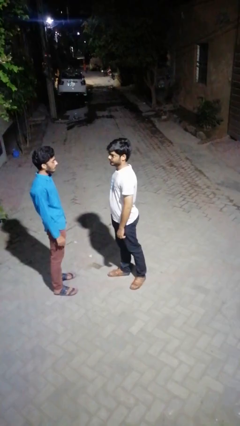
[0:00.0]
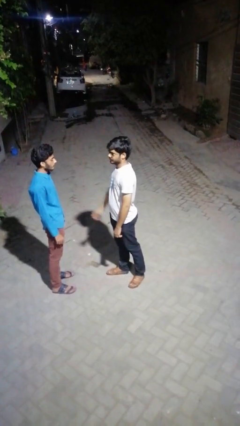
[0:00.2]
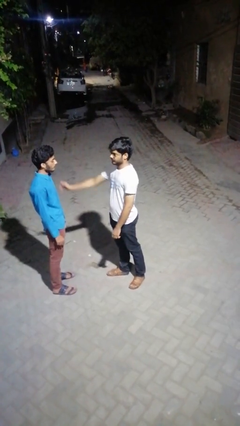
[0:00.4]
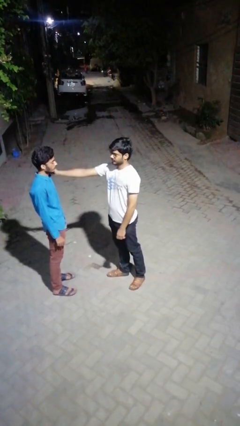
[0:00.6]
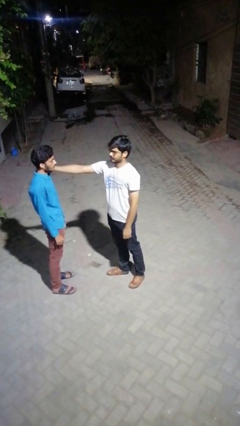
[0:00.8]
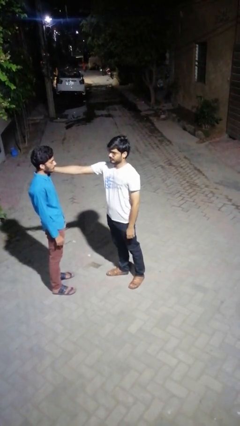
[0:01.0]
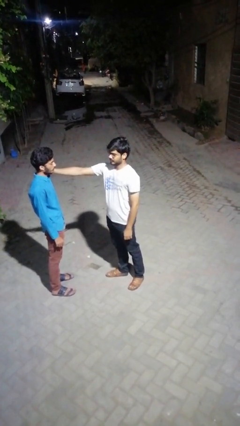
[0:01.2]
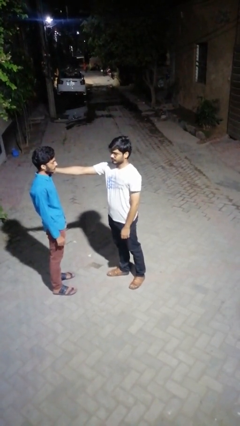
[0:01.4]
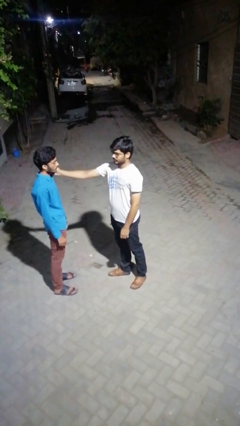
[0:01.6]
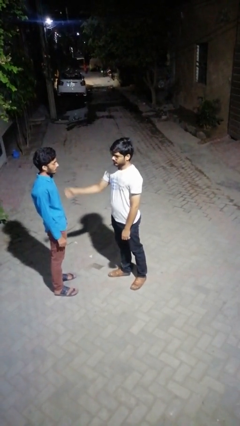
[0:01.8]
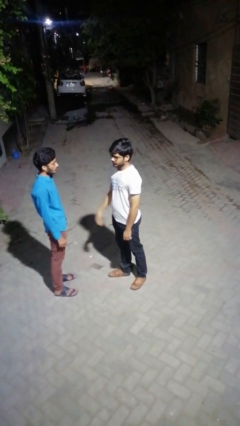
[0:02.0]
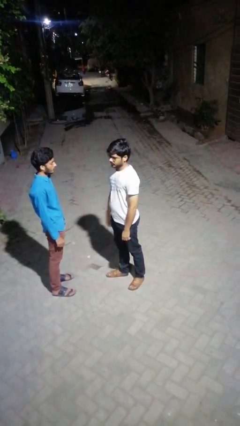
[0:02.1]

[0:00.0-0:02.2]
person touches face of person

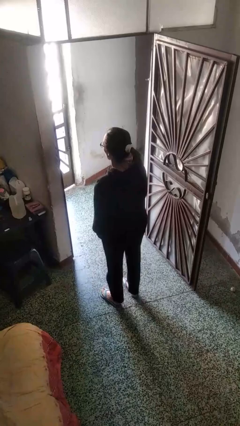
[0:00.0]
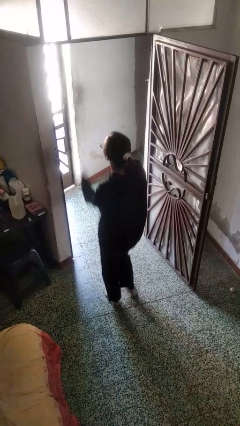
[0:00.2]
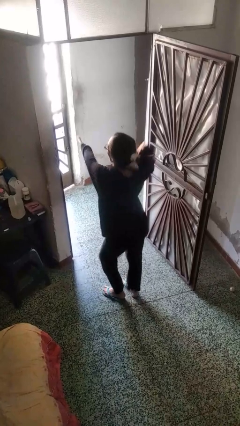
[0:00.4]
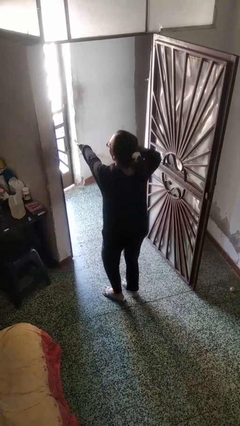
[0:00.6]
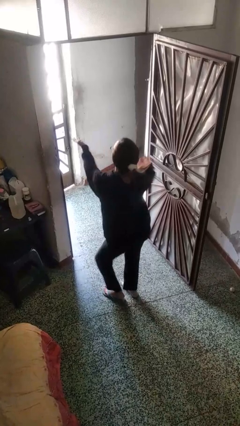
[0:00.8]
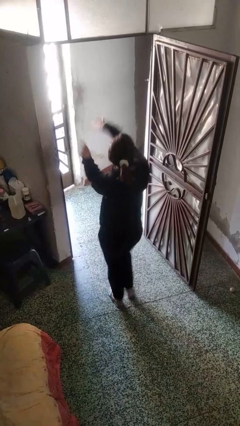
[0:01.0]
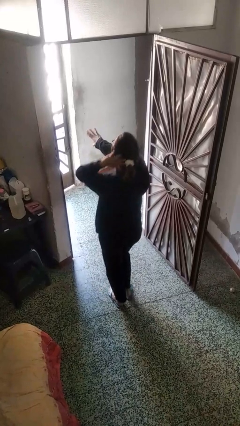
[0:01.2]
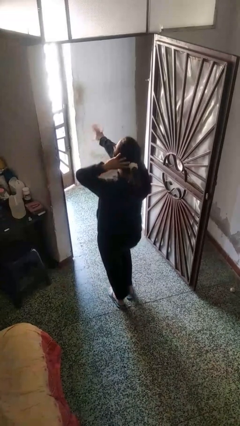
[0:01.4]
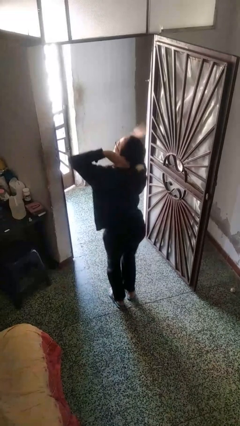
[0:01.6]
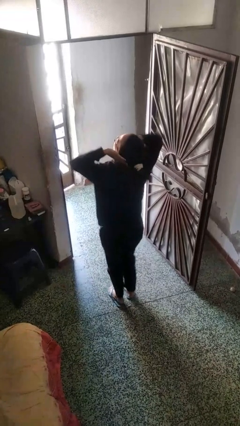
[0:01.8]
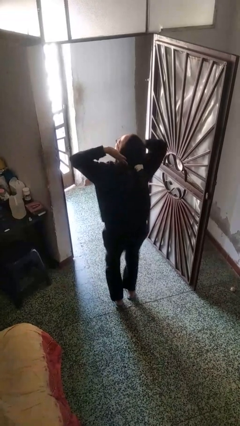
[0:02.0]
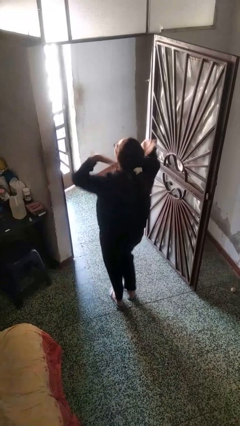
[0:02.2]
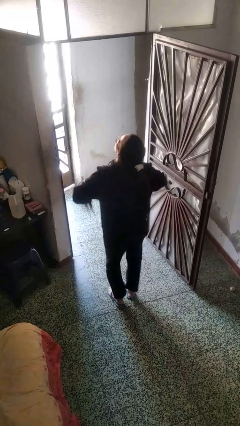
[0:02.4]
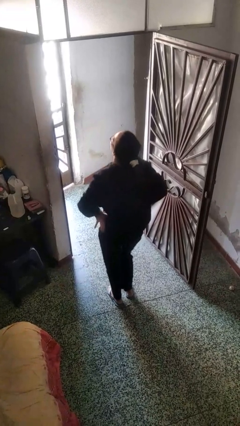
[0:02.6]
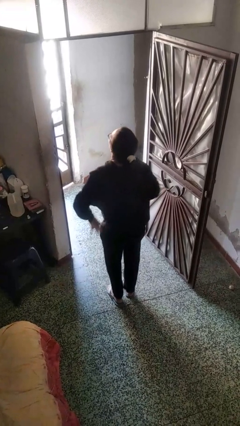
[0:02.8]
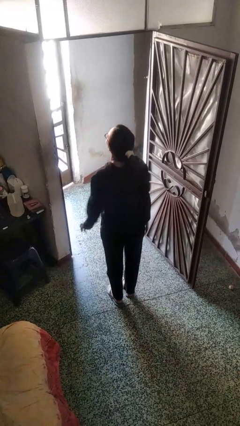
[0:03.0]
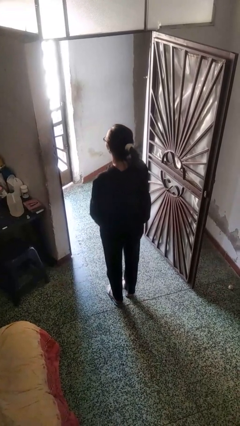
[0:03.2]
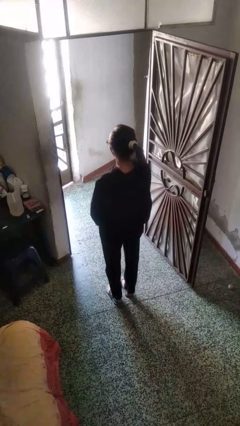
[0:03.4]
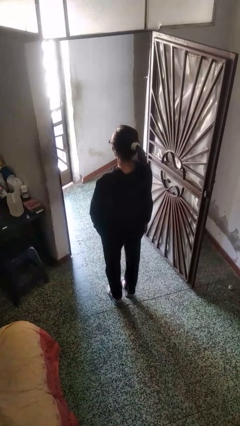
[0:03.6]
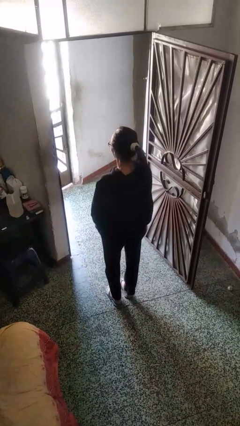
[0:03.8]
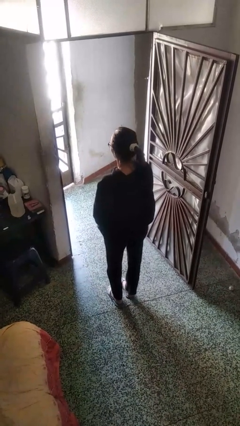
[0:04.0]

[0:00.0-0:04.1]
person dances in place

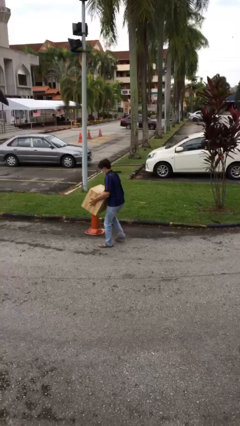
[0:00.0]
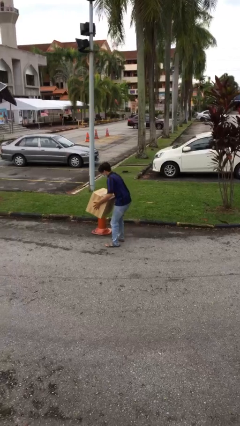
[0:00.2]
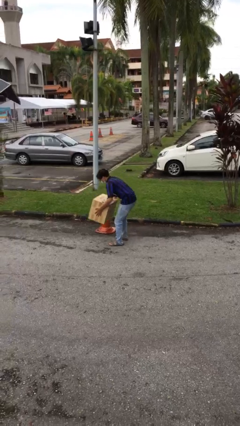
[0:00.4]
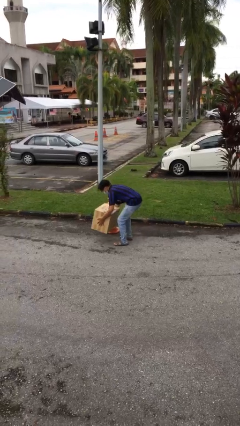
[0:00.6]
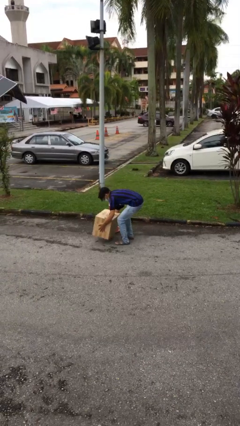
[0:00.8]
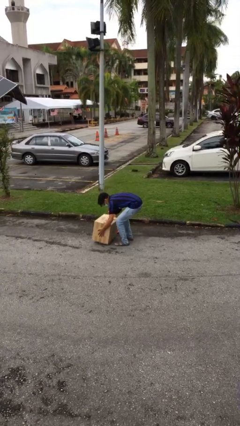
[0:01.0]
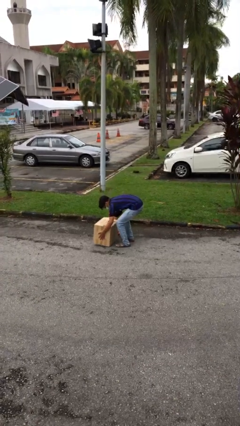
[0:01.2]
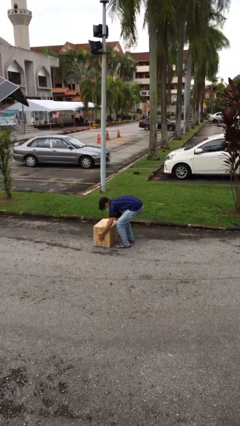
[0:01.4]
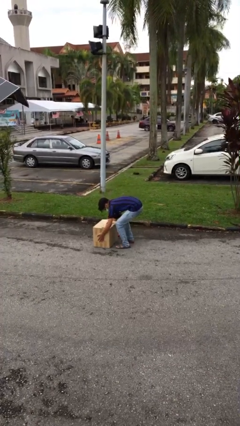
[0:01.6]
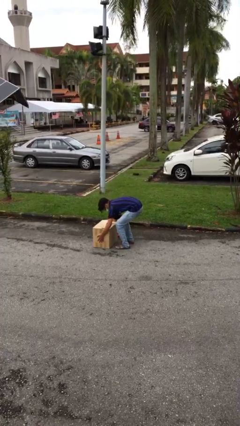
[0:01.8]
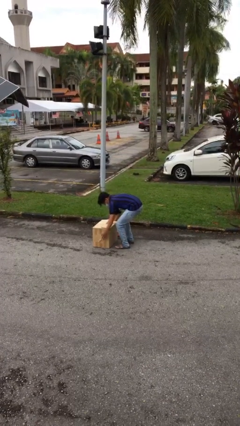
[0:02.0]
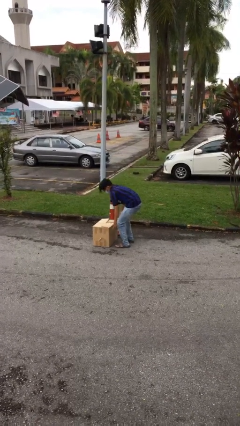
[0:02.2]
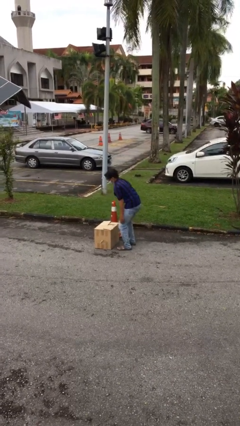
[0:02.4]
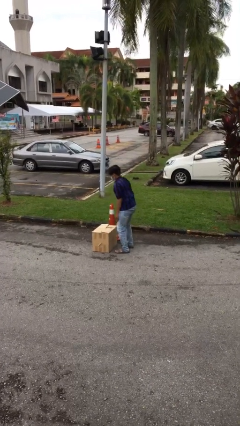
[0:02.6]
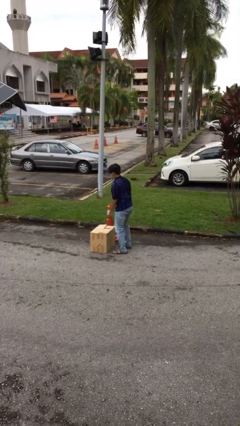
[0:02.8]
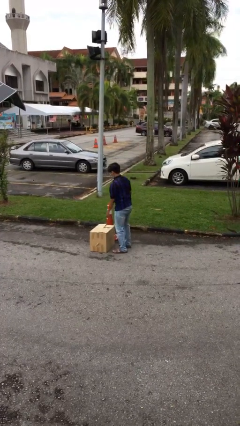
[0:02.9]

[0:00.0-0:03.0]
person puts down object on floor

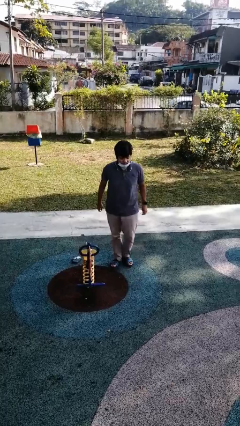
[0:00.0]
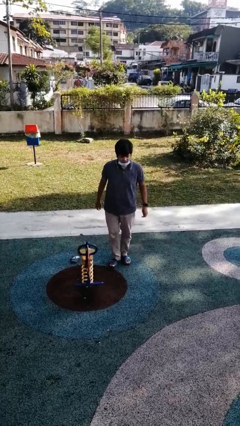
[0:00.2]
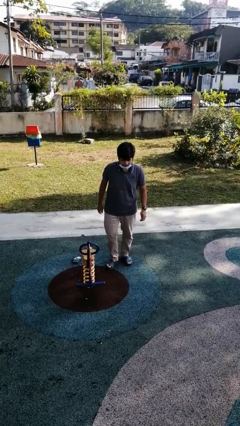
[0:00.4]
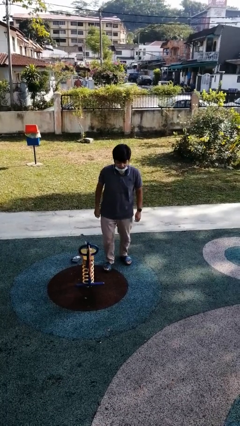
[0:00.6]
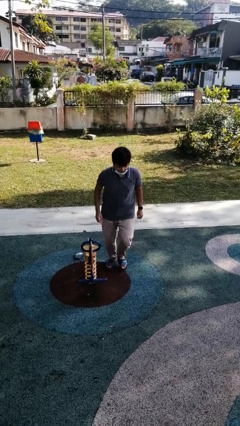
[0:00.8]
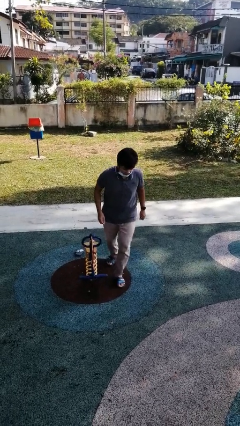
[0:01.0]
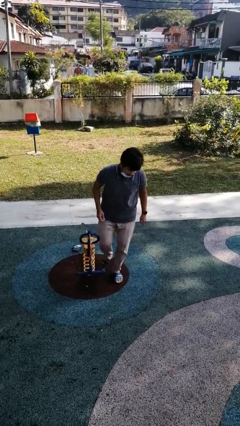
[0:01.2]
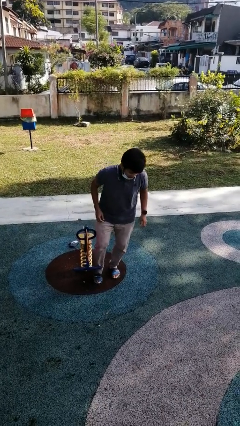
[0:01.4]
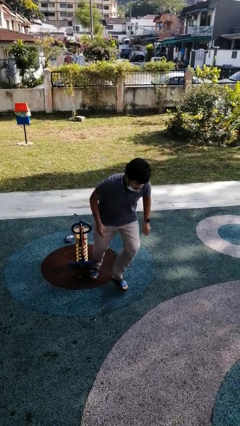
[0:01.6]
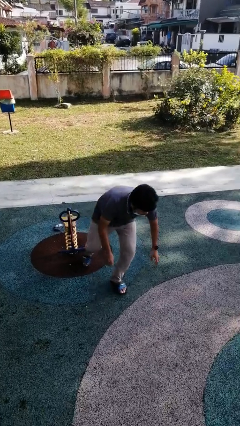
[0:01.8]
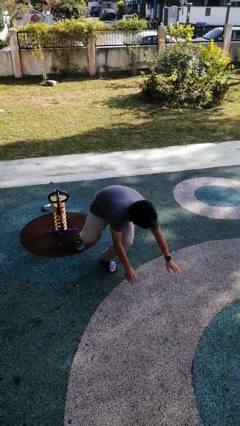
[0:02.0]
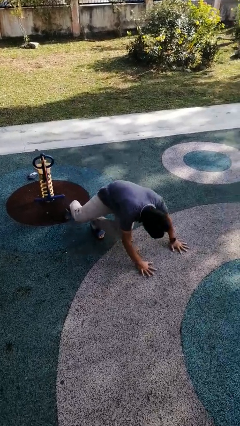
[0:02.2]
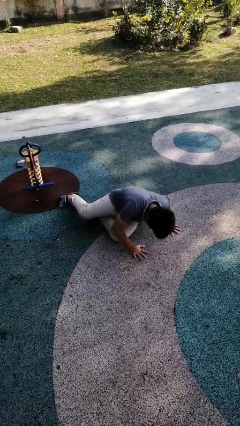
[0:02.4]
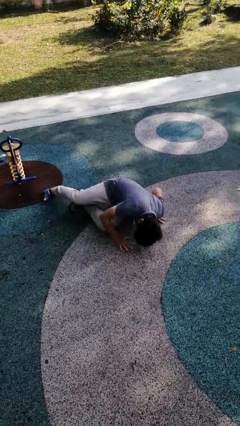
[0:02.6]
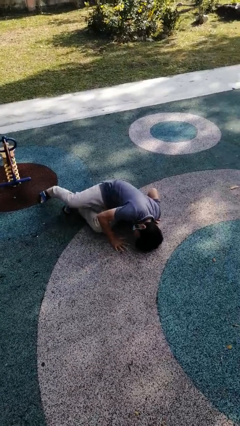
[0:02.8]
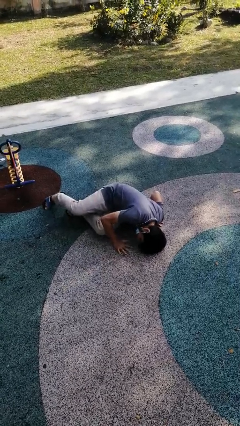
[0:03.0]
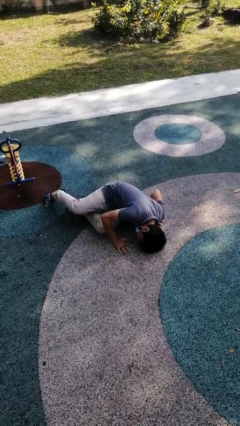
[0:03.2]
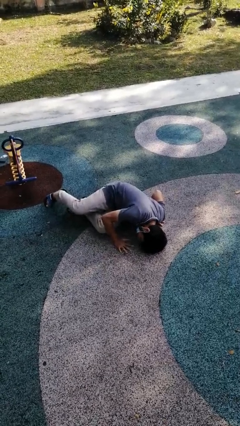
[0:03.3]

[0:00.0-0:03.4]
person trips on object on floor

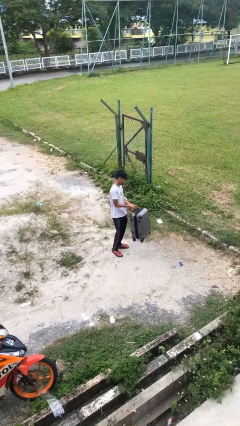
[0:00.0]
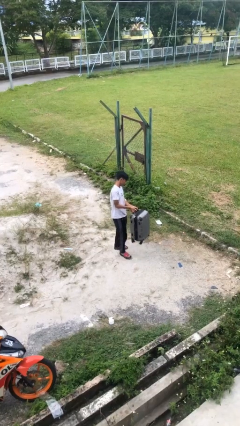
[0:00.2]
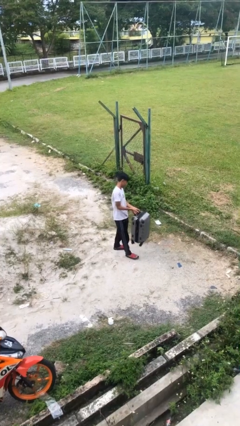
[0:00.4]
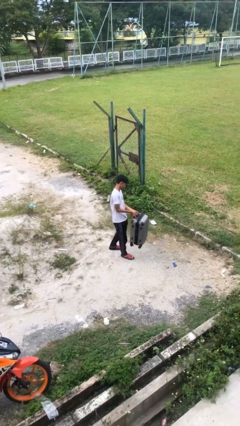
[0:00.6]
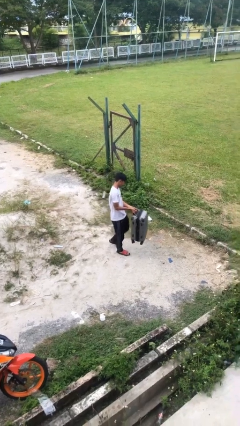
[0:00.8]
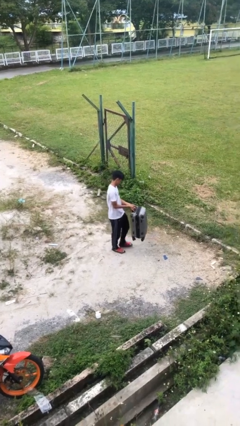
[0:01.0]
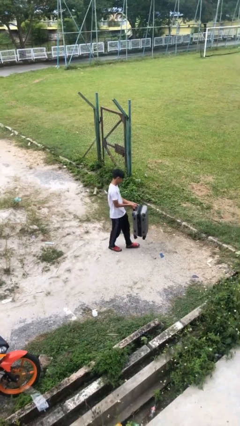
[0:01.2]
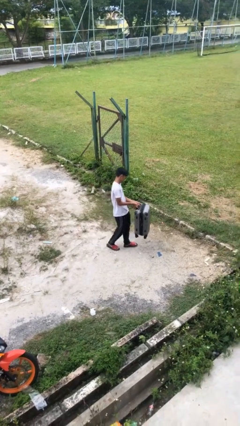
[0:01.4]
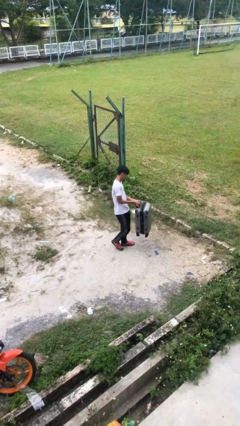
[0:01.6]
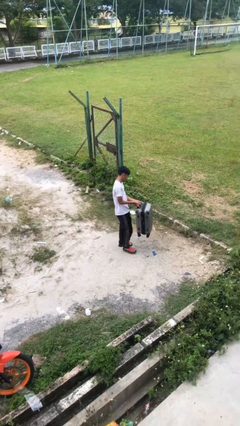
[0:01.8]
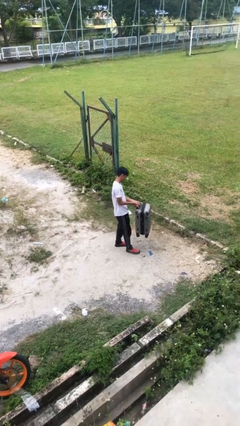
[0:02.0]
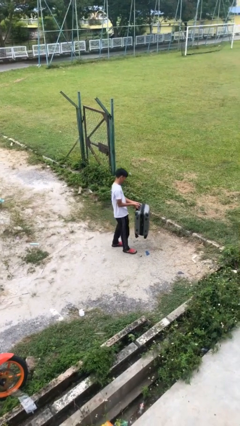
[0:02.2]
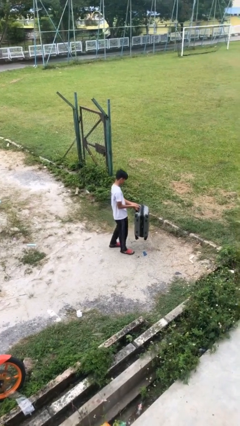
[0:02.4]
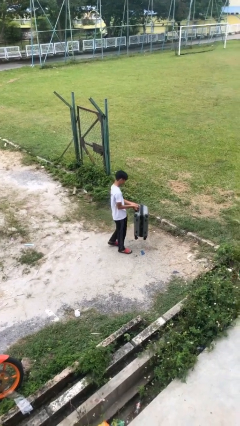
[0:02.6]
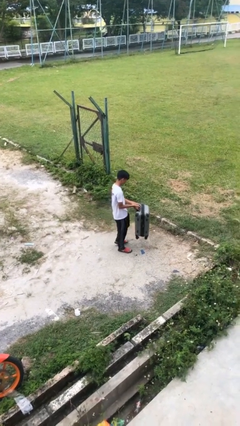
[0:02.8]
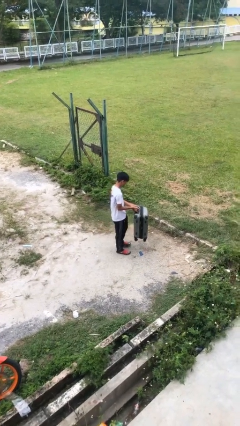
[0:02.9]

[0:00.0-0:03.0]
person carries heavy object

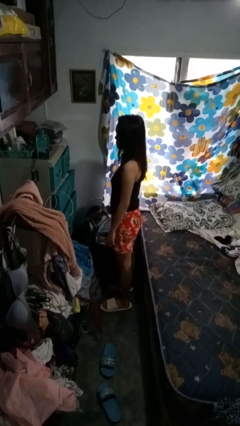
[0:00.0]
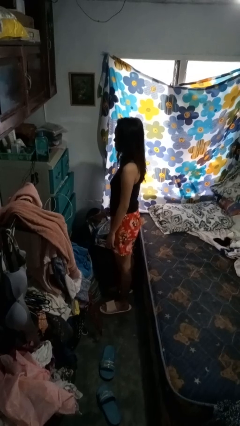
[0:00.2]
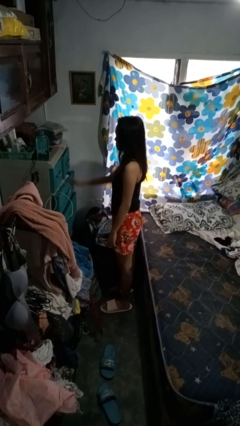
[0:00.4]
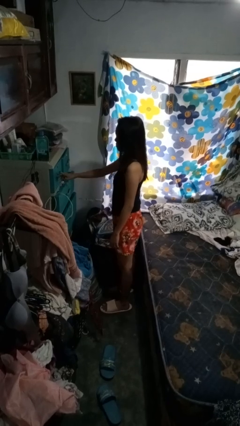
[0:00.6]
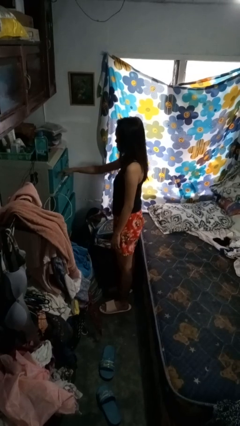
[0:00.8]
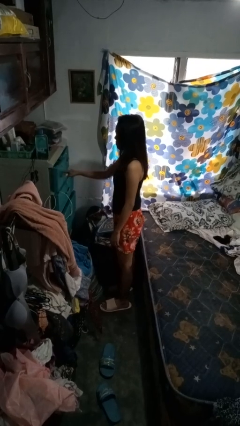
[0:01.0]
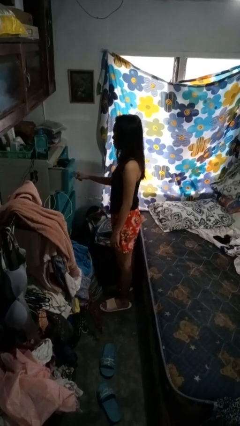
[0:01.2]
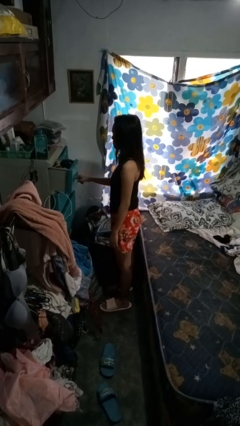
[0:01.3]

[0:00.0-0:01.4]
person opens dresser drawer
